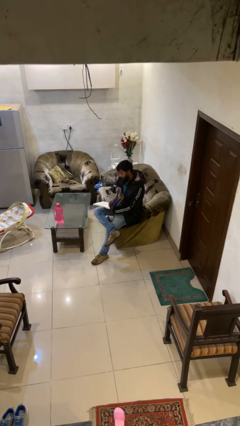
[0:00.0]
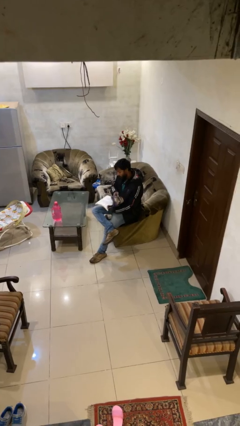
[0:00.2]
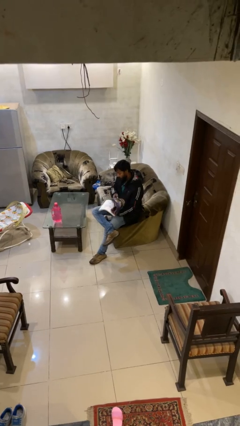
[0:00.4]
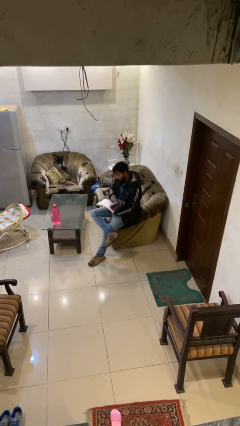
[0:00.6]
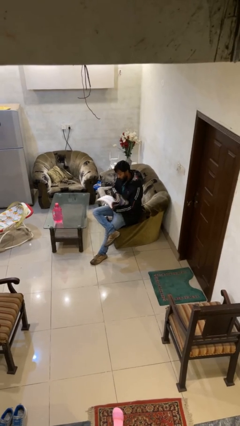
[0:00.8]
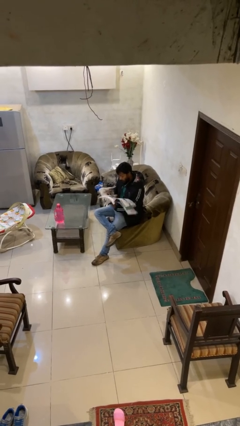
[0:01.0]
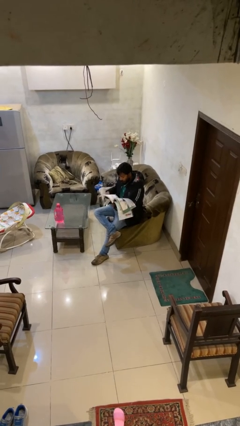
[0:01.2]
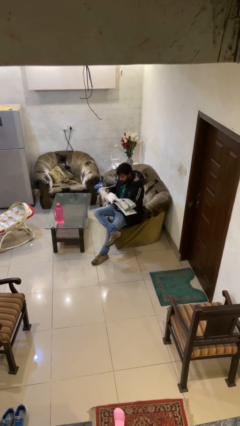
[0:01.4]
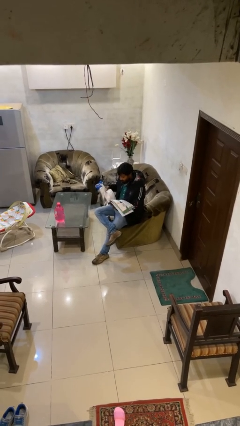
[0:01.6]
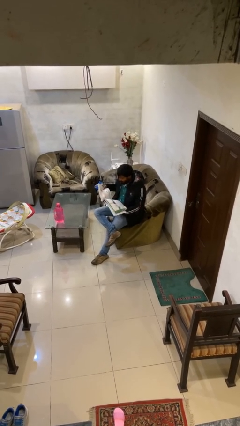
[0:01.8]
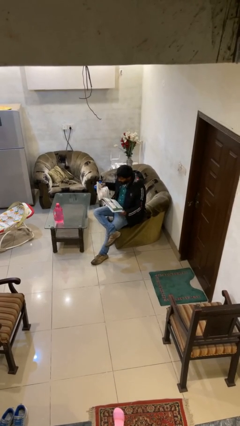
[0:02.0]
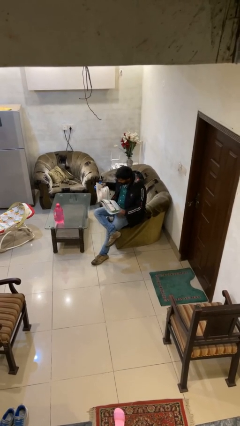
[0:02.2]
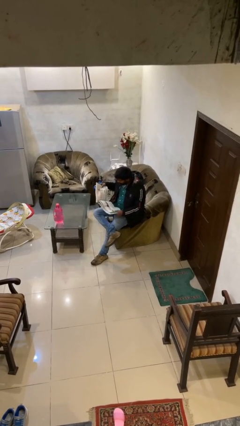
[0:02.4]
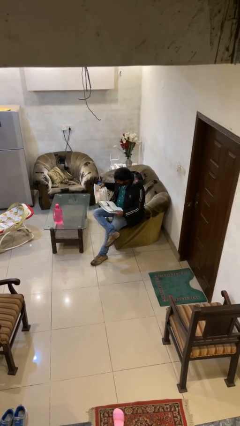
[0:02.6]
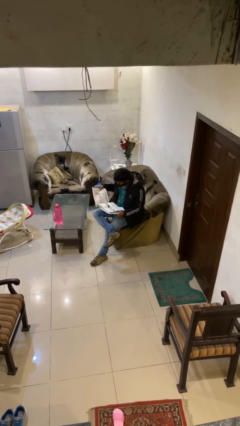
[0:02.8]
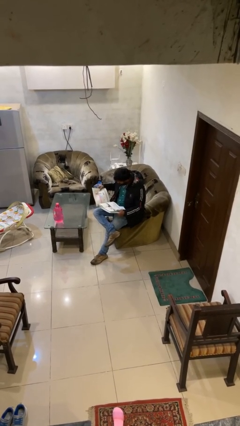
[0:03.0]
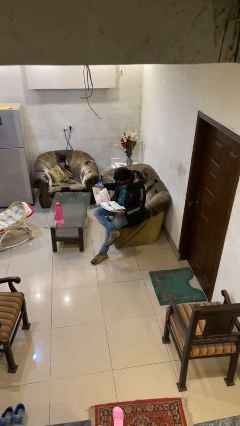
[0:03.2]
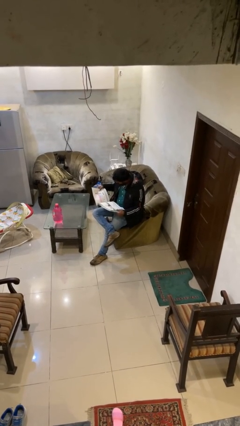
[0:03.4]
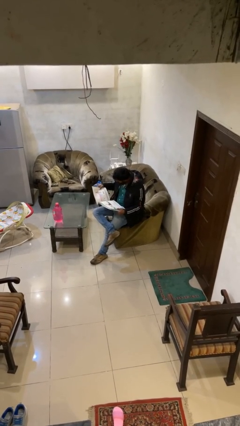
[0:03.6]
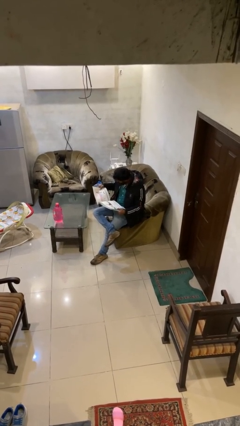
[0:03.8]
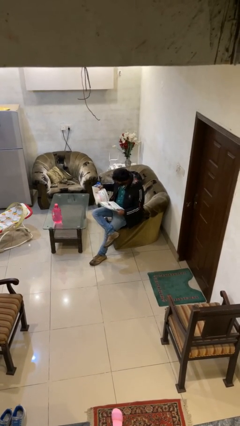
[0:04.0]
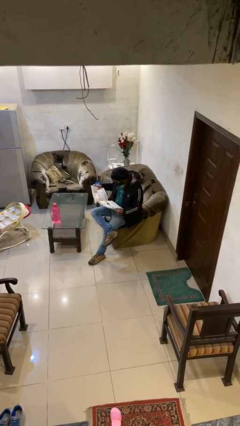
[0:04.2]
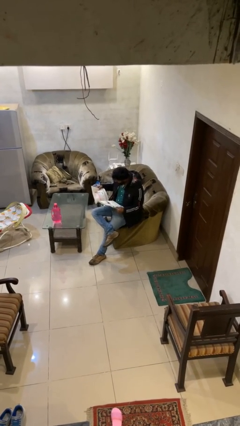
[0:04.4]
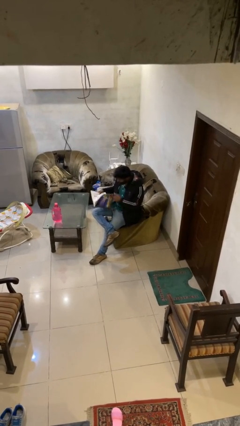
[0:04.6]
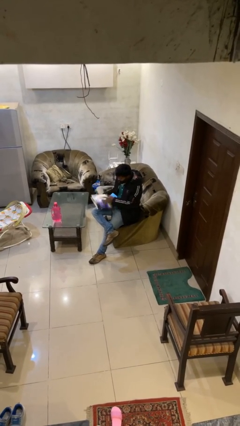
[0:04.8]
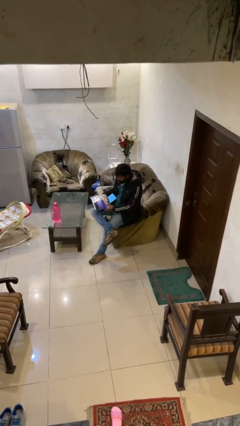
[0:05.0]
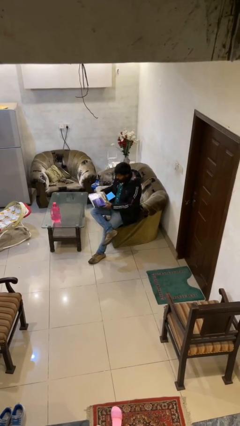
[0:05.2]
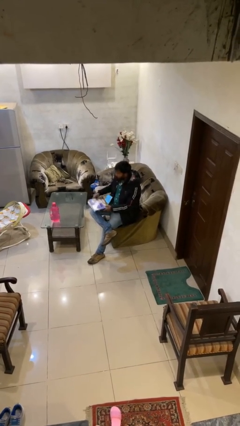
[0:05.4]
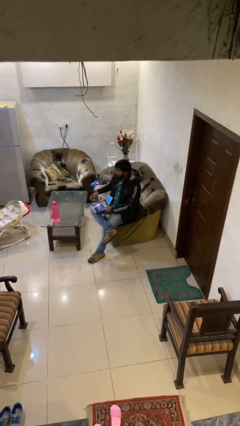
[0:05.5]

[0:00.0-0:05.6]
person reads document

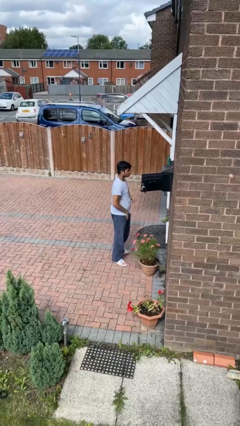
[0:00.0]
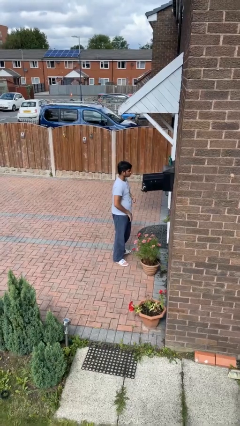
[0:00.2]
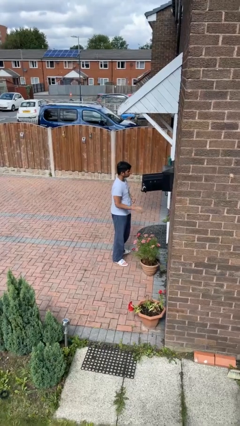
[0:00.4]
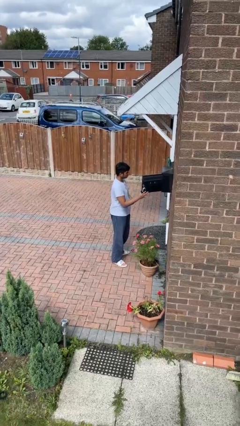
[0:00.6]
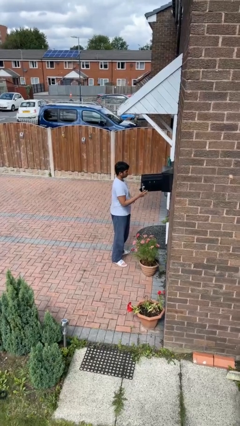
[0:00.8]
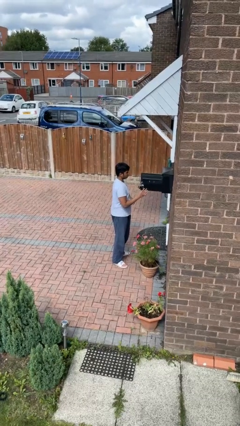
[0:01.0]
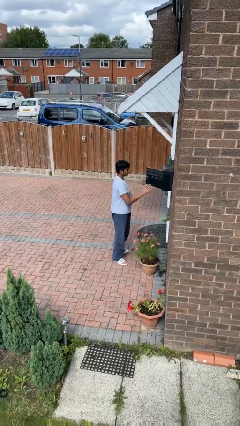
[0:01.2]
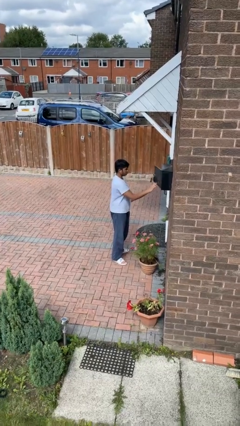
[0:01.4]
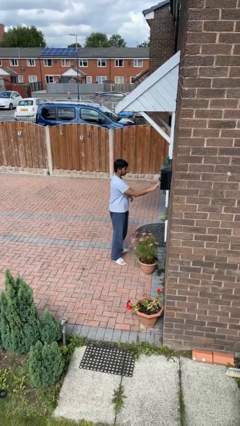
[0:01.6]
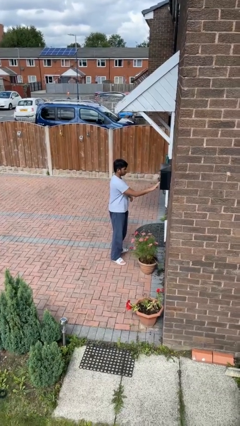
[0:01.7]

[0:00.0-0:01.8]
person closes mailbox

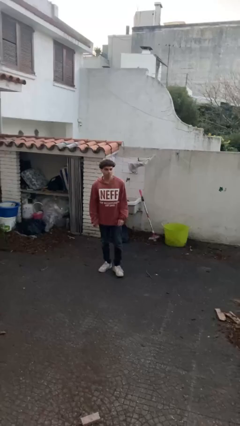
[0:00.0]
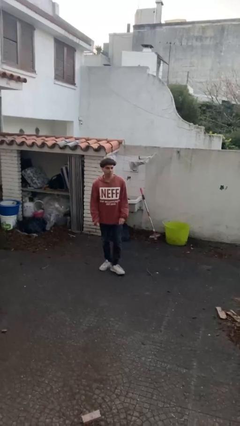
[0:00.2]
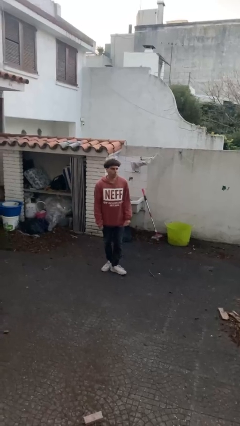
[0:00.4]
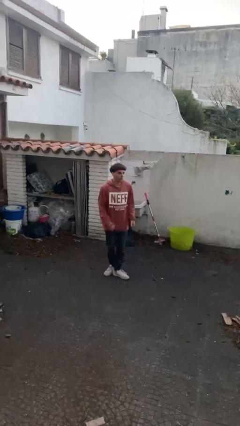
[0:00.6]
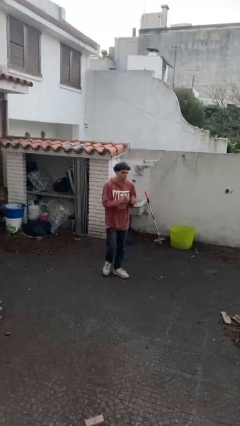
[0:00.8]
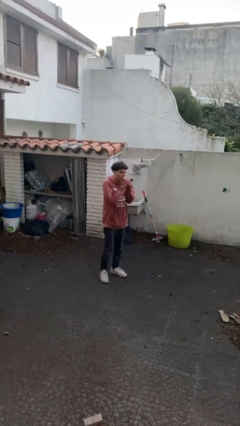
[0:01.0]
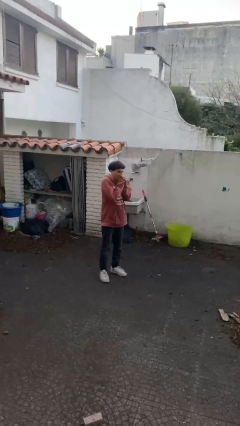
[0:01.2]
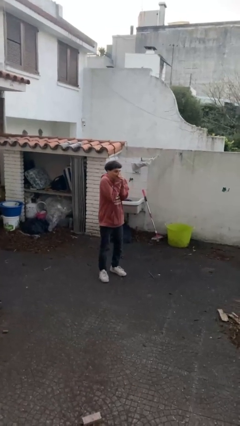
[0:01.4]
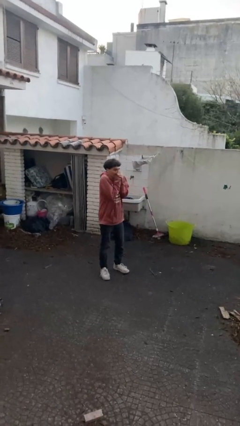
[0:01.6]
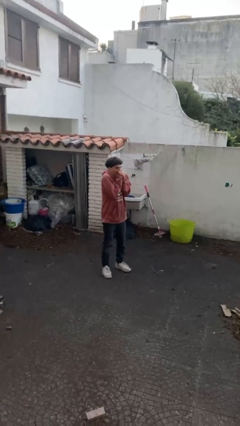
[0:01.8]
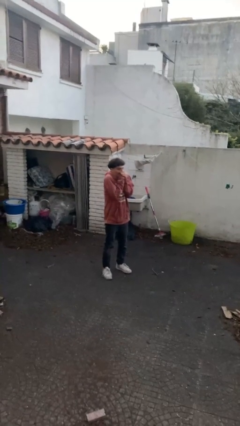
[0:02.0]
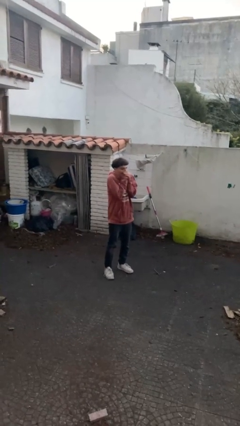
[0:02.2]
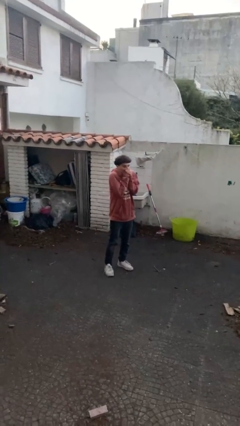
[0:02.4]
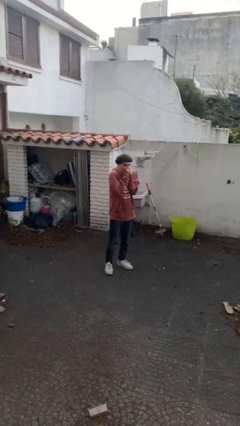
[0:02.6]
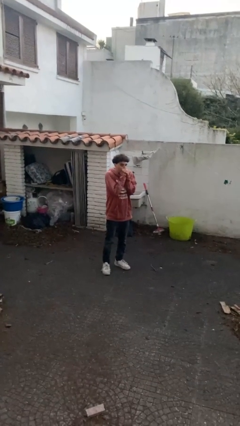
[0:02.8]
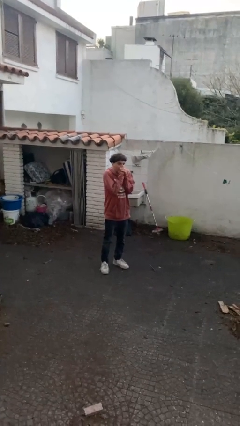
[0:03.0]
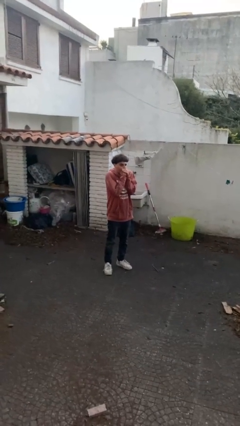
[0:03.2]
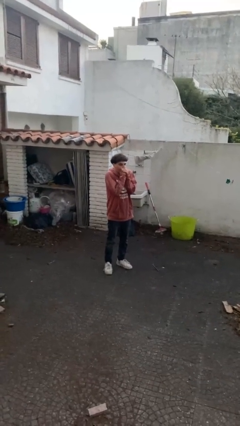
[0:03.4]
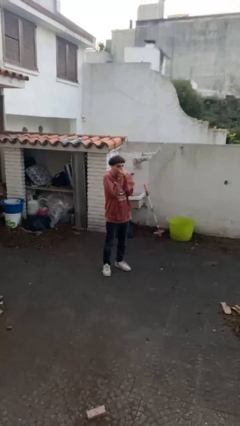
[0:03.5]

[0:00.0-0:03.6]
person blows into hands

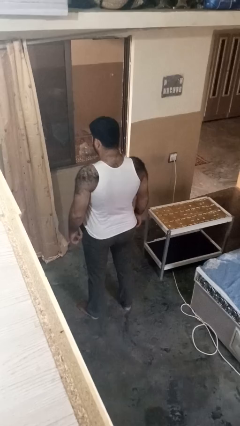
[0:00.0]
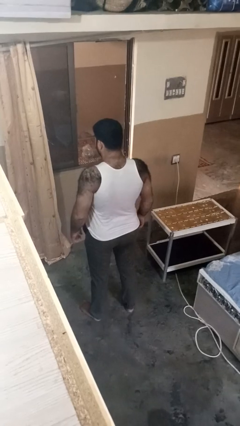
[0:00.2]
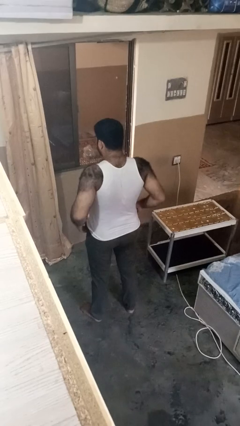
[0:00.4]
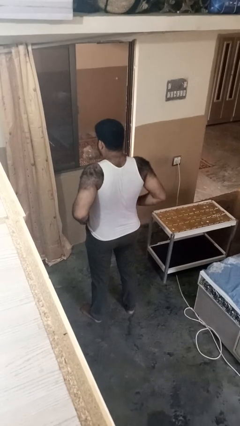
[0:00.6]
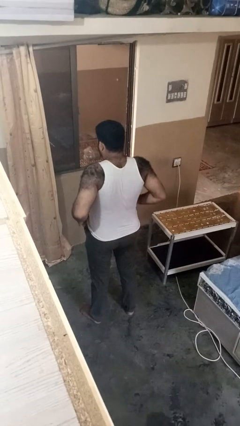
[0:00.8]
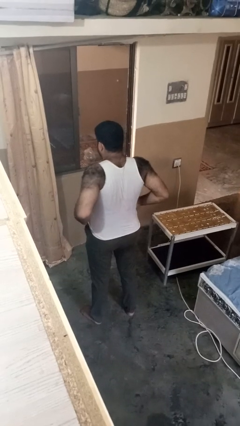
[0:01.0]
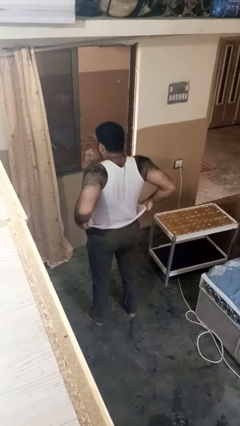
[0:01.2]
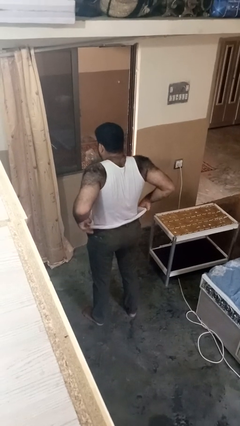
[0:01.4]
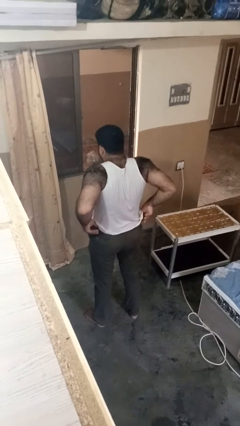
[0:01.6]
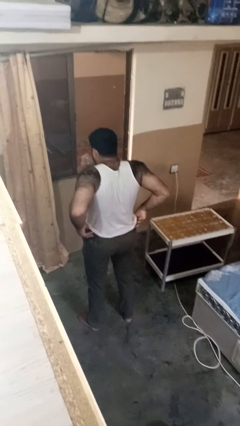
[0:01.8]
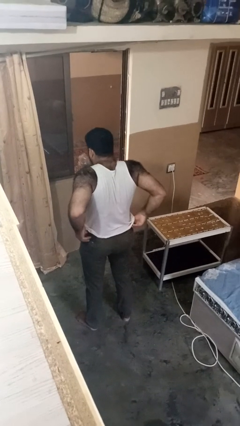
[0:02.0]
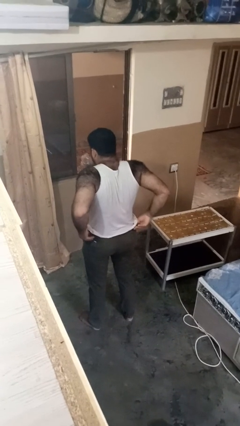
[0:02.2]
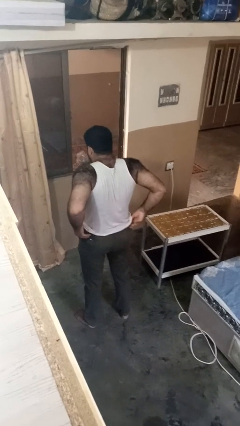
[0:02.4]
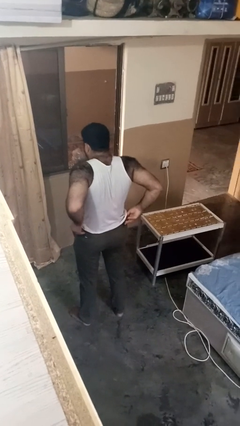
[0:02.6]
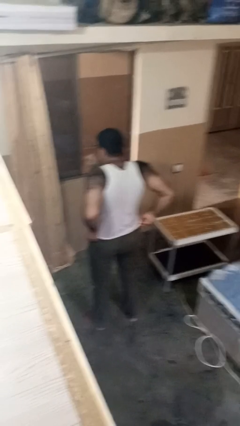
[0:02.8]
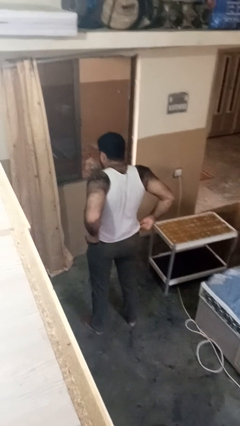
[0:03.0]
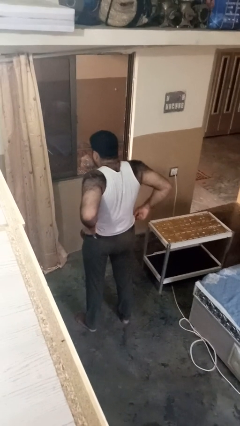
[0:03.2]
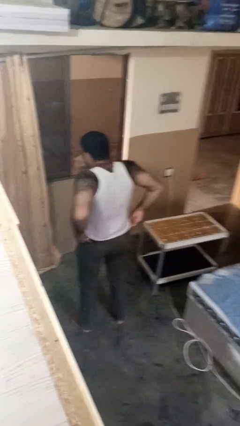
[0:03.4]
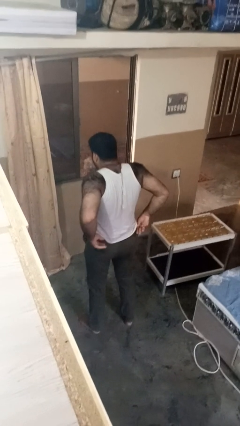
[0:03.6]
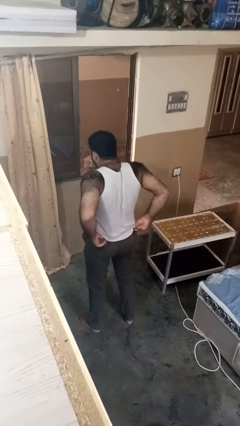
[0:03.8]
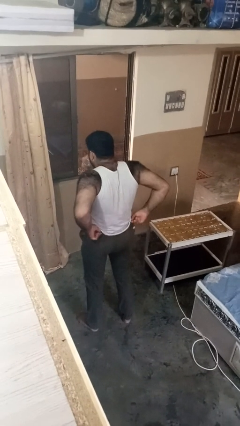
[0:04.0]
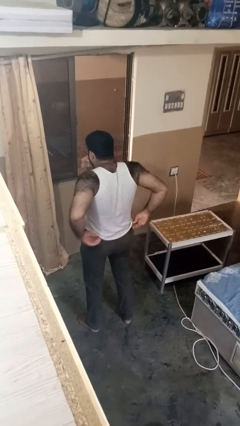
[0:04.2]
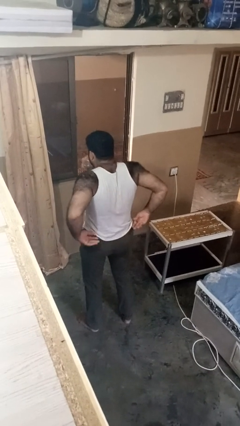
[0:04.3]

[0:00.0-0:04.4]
person hikes up pants

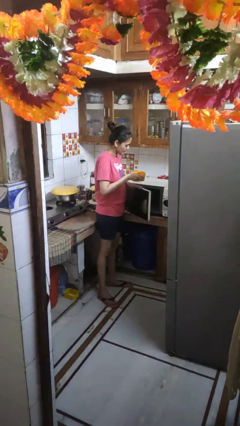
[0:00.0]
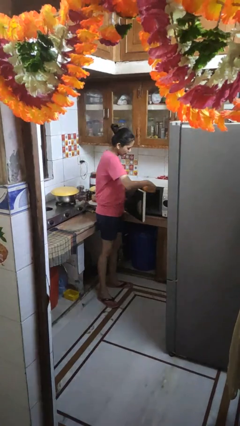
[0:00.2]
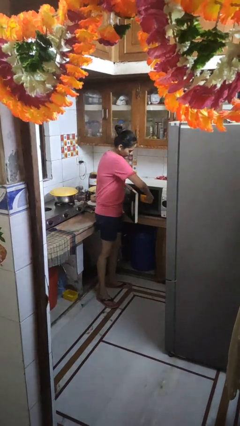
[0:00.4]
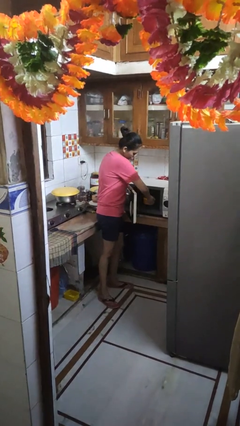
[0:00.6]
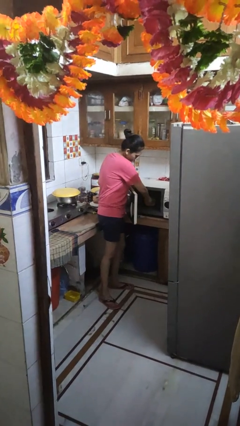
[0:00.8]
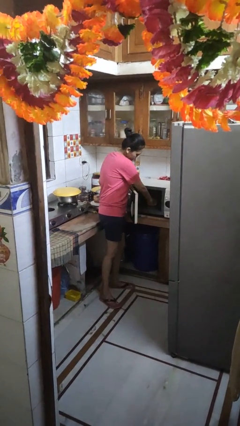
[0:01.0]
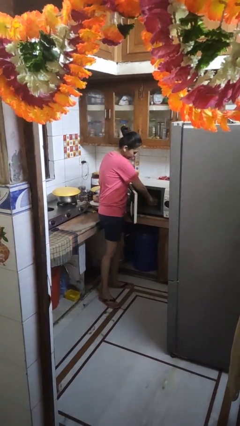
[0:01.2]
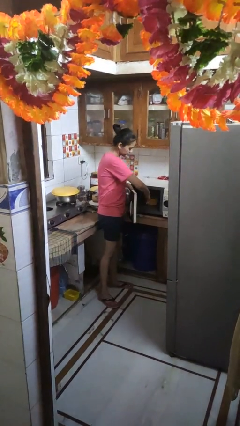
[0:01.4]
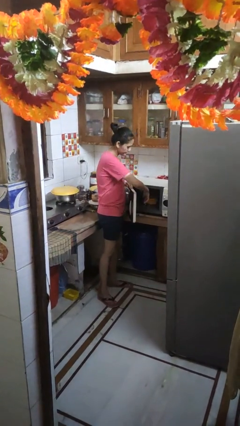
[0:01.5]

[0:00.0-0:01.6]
person puts object into microwave

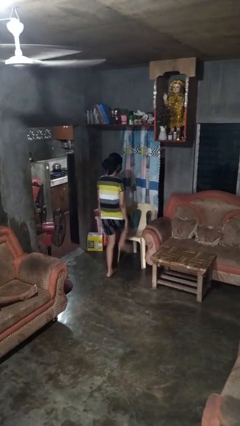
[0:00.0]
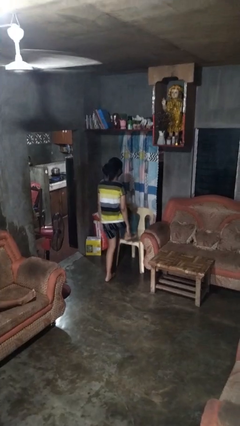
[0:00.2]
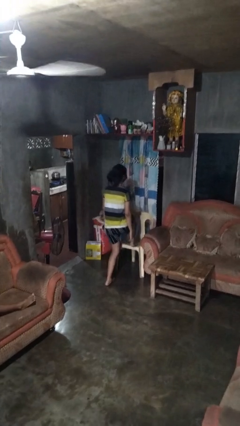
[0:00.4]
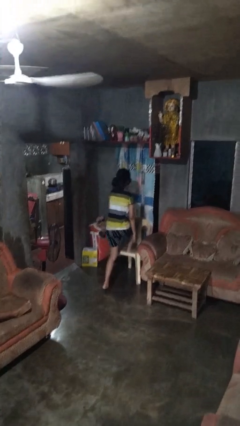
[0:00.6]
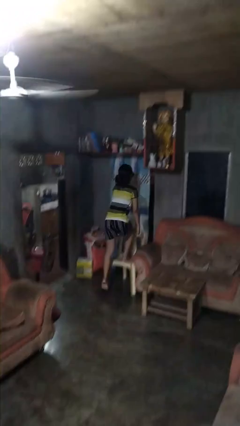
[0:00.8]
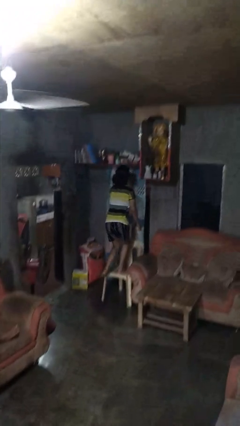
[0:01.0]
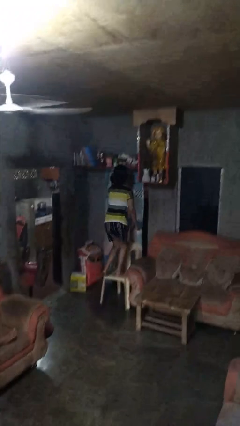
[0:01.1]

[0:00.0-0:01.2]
person climbs on chair
